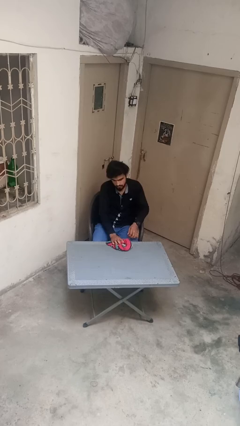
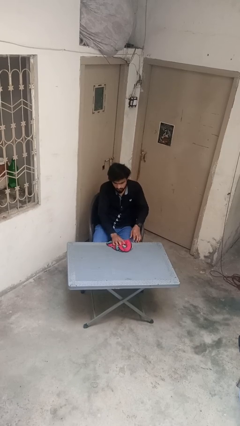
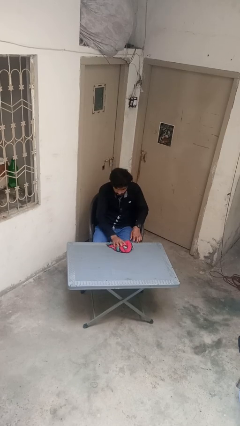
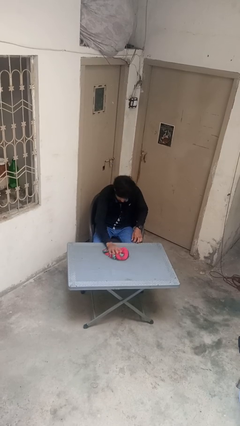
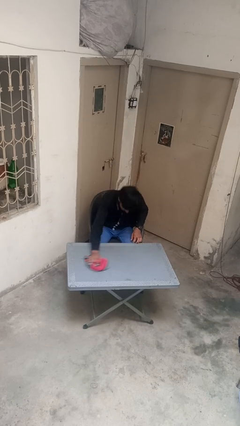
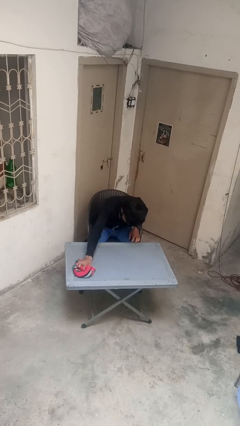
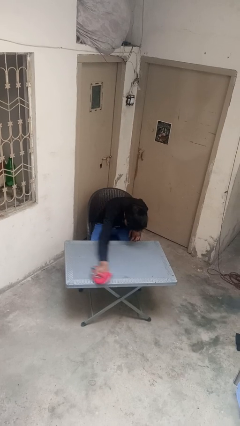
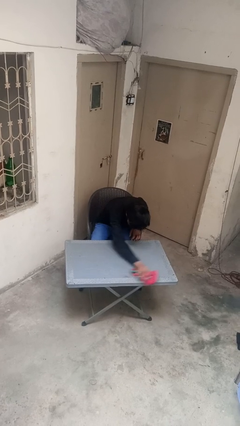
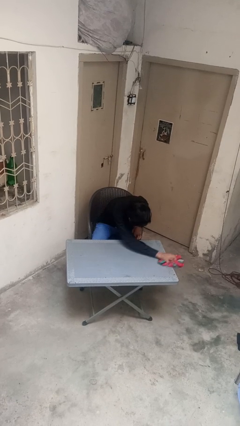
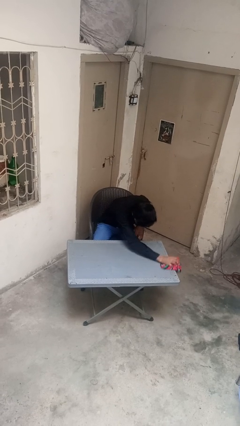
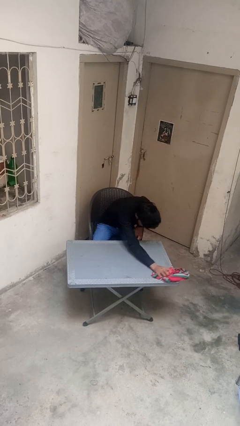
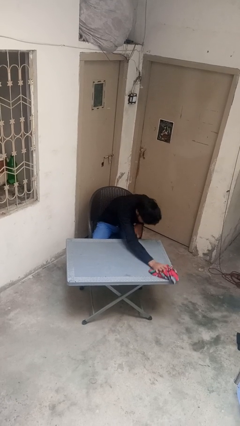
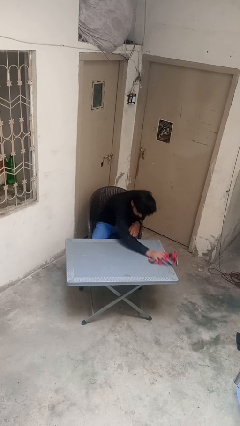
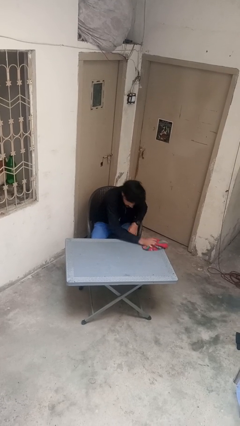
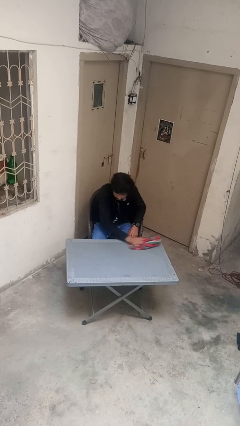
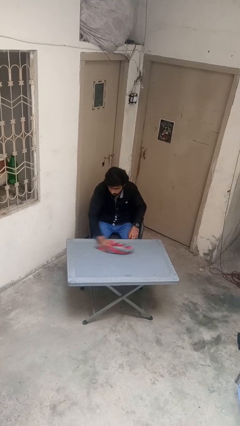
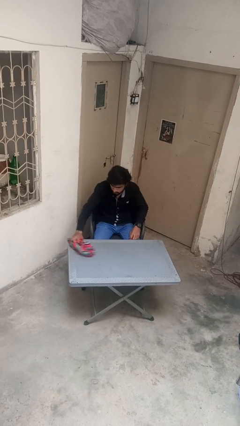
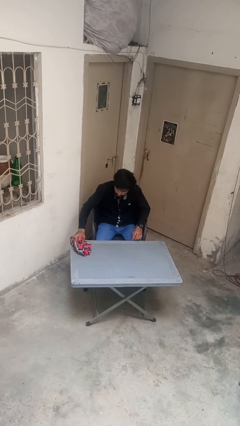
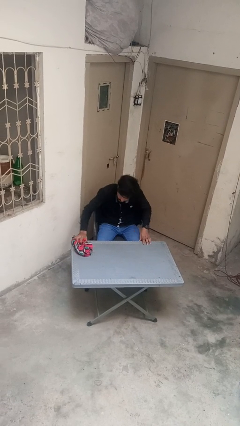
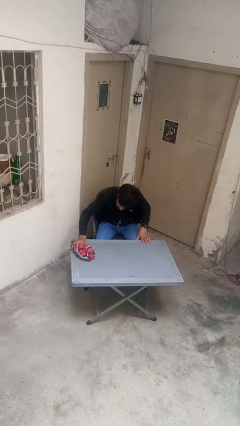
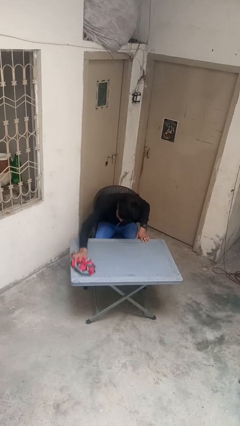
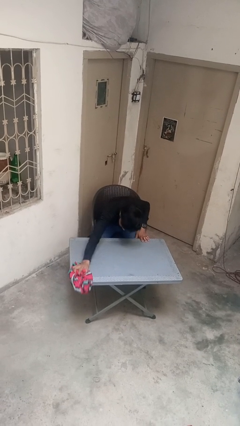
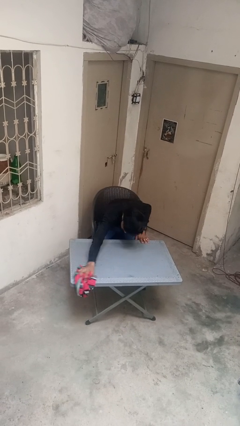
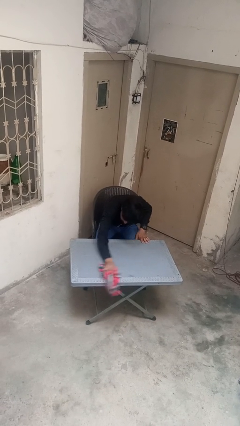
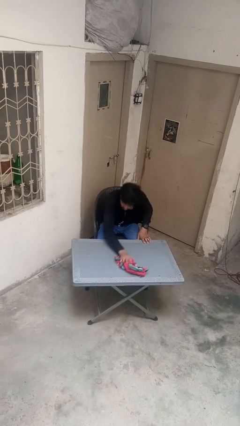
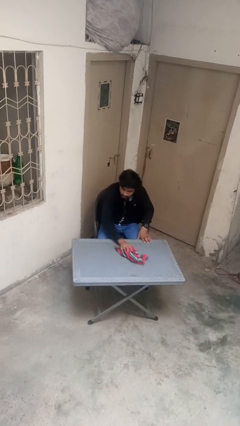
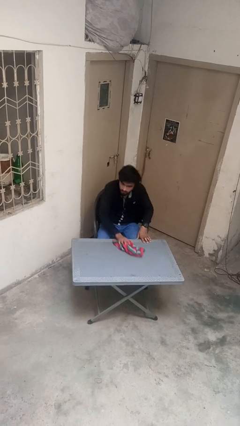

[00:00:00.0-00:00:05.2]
person cleans table with rag

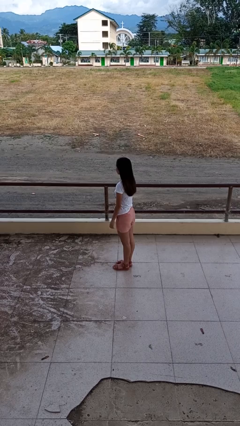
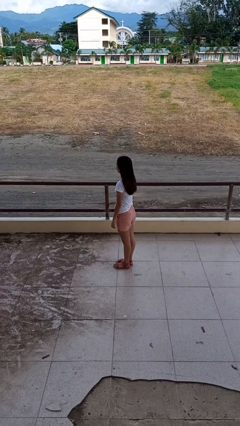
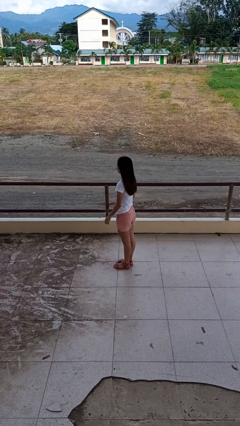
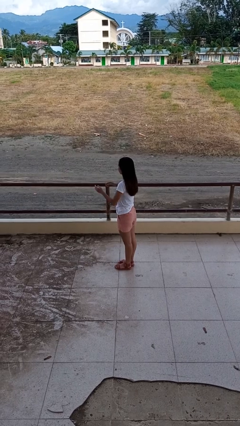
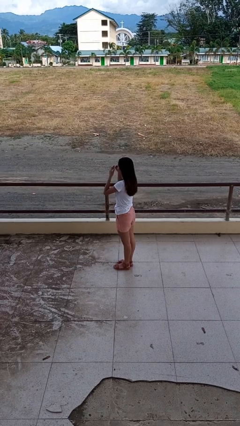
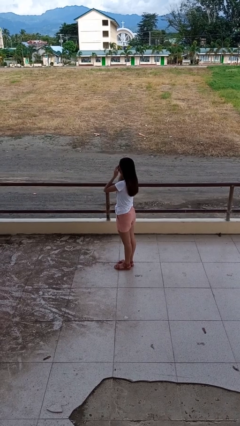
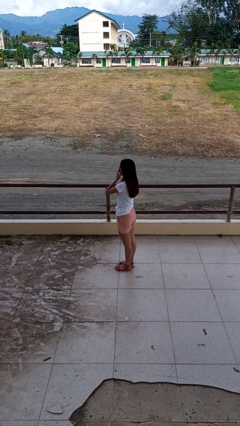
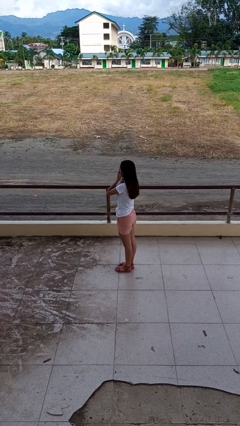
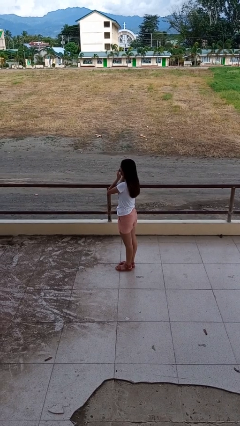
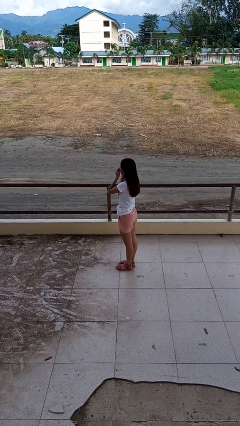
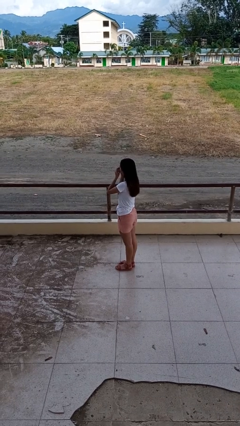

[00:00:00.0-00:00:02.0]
person rubs eyes

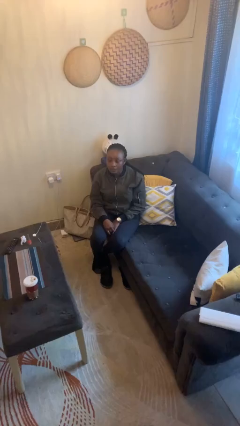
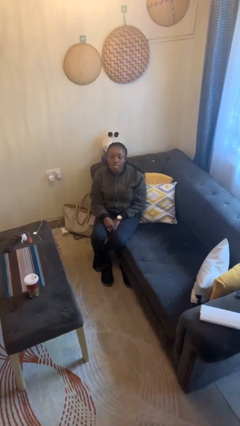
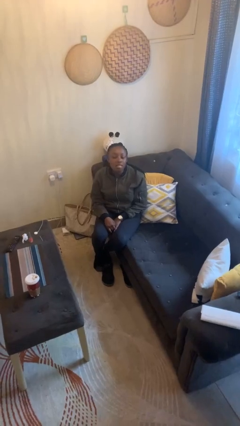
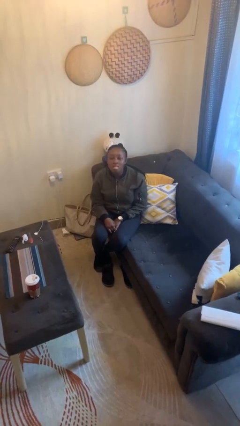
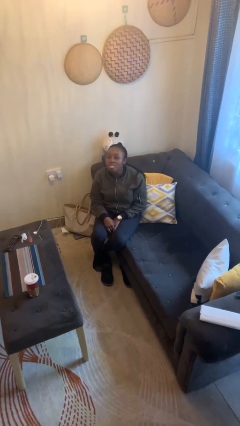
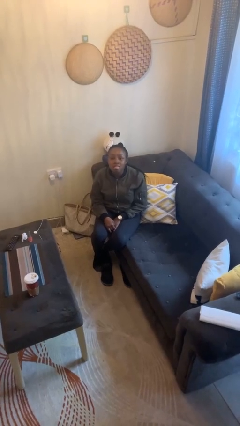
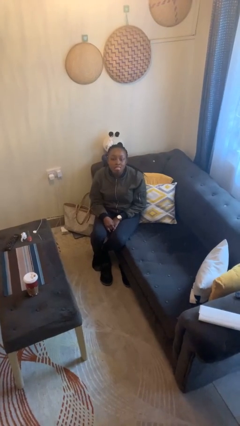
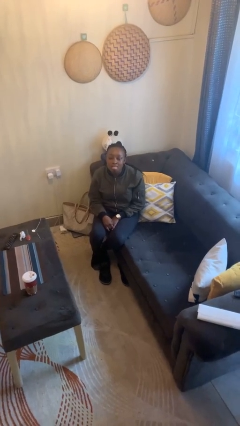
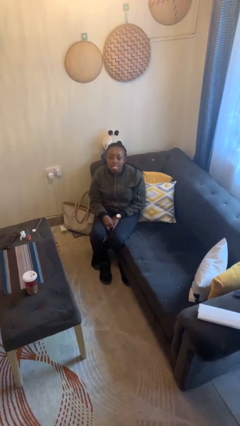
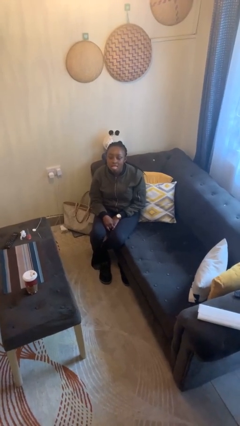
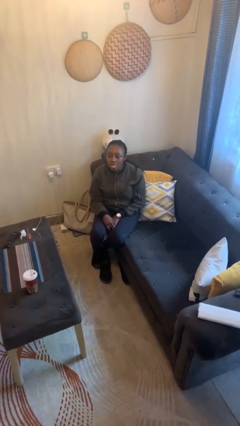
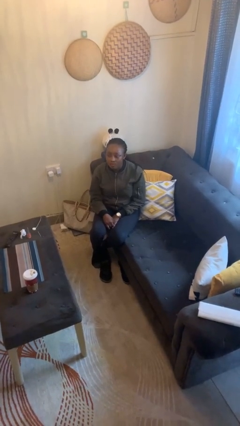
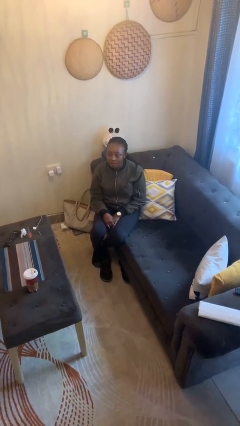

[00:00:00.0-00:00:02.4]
person sticks out tongue

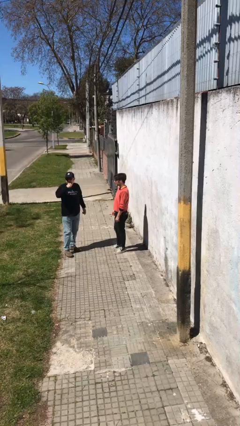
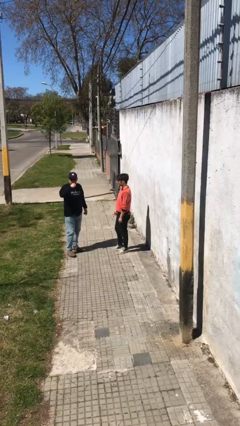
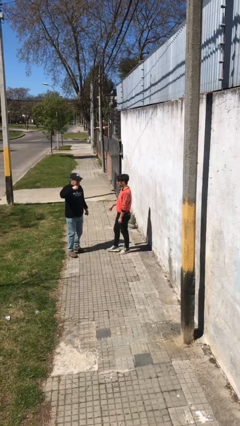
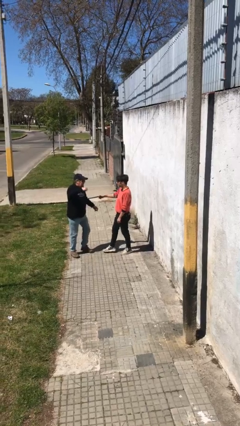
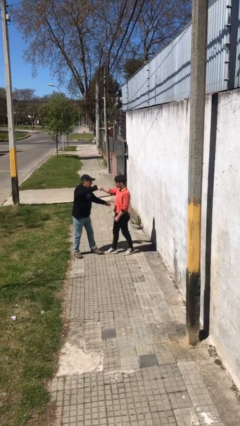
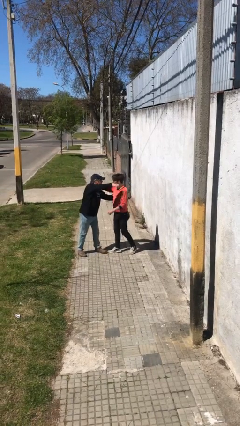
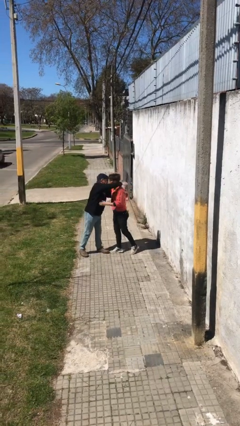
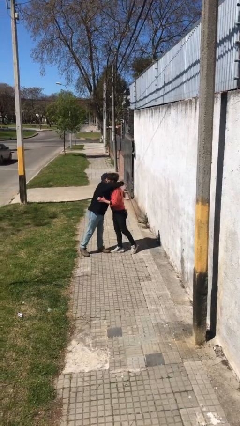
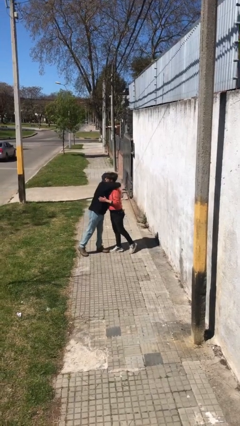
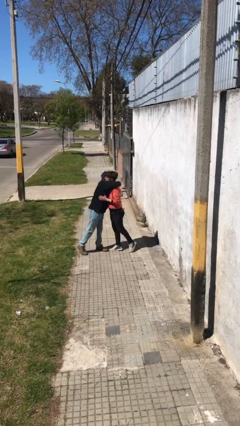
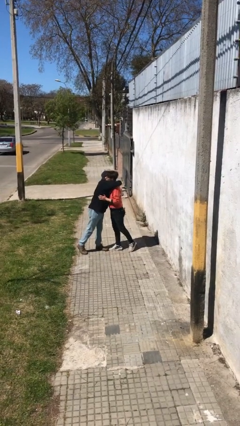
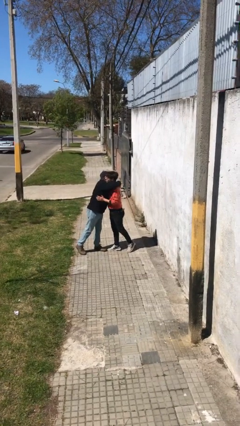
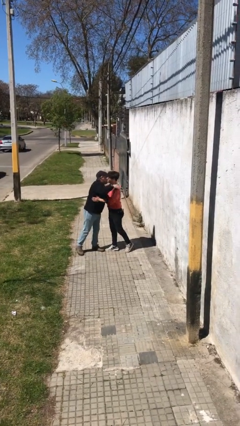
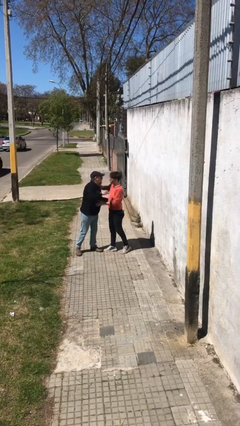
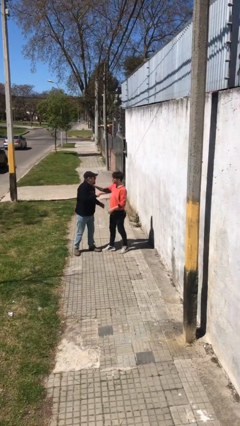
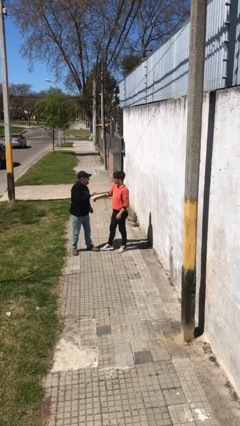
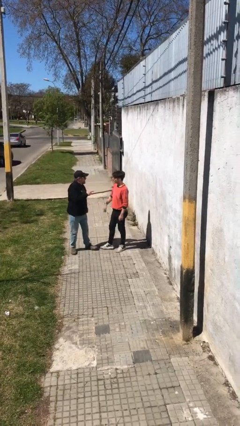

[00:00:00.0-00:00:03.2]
person embraces person

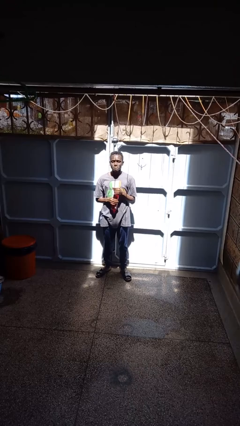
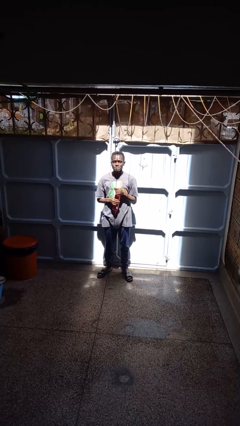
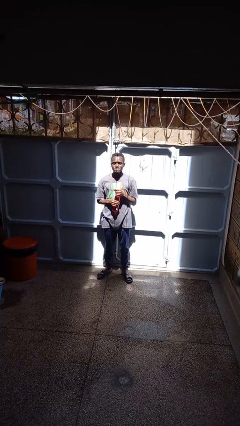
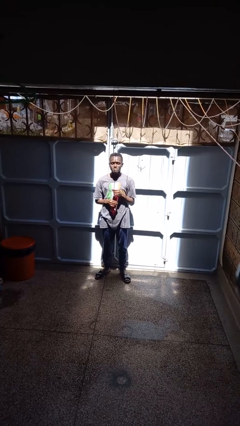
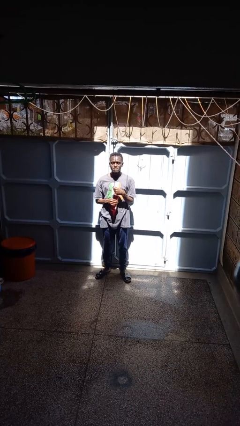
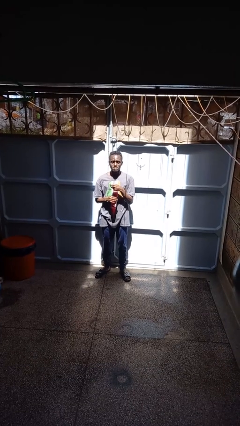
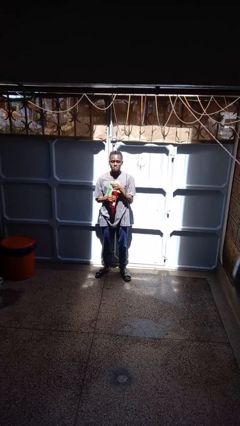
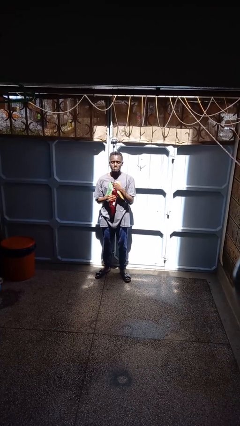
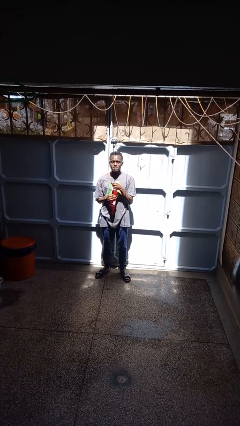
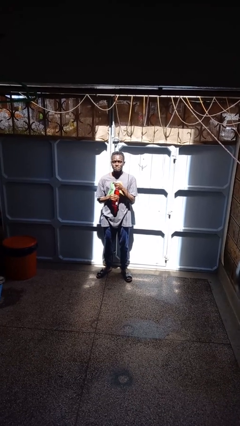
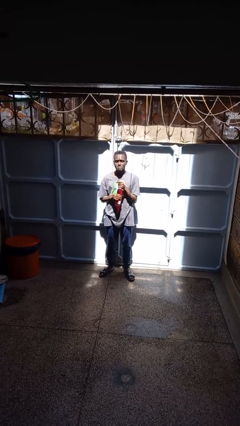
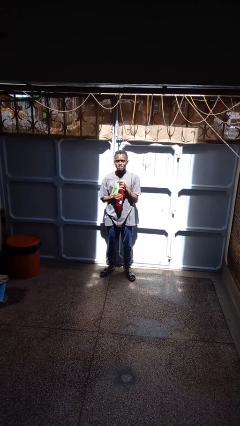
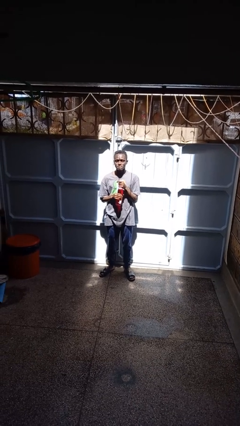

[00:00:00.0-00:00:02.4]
person opens beverage can

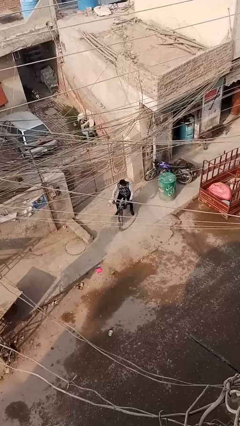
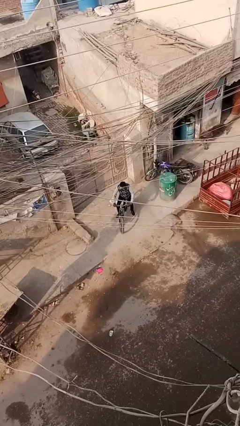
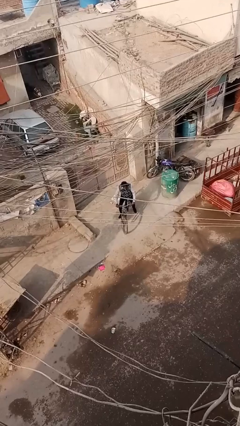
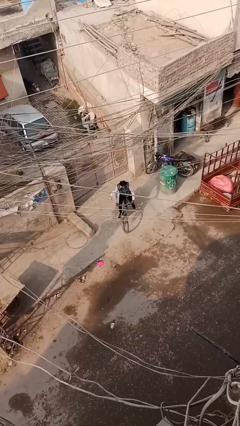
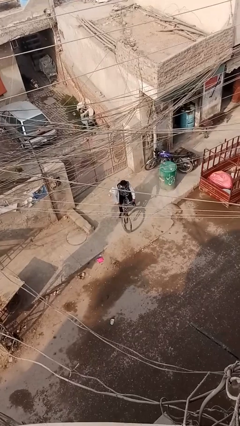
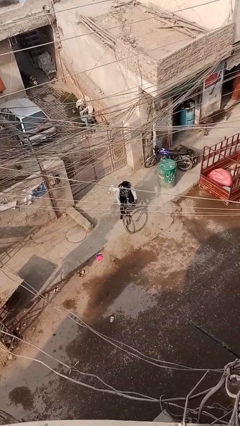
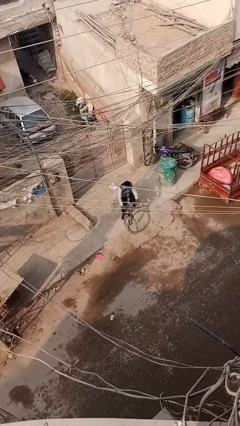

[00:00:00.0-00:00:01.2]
person rides bicycle

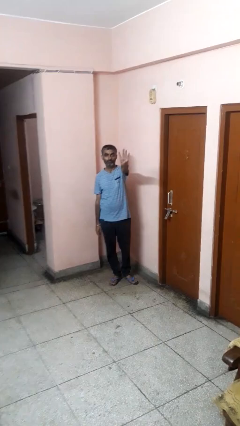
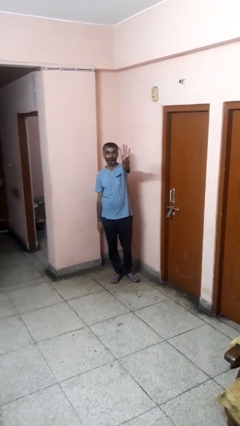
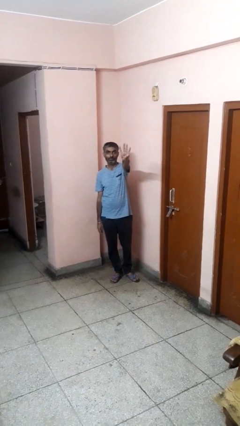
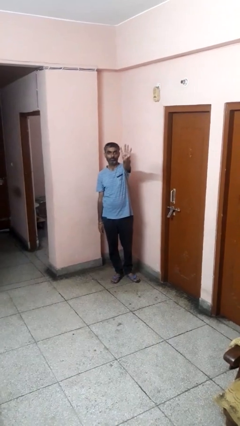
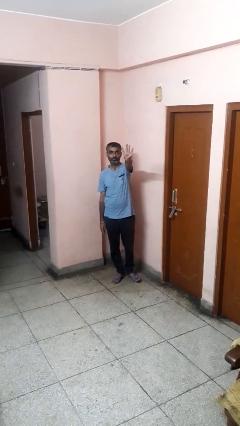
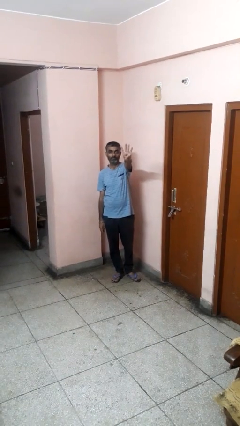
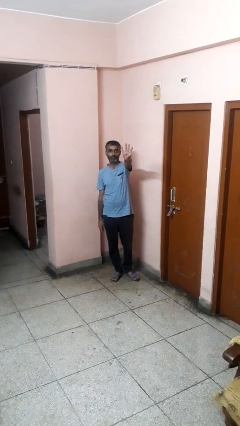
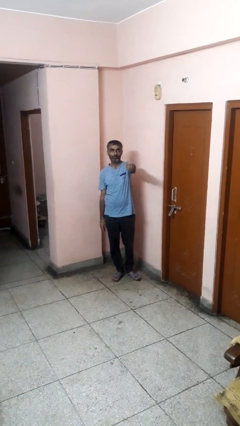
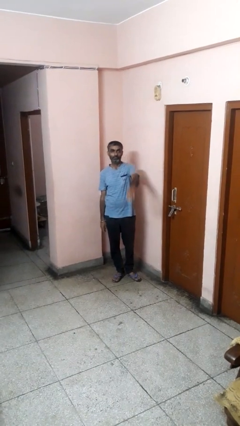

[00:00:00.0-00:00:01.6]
person gestures number four
